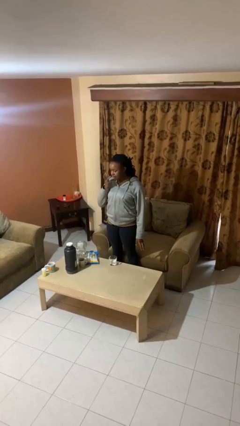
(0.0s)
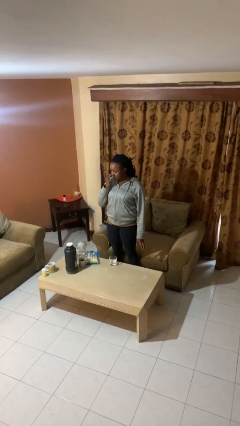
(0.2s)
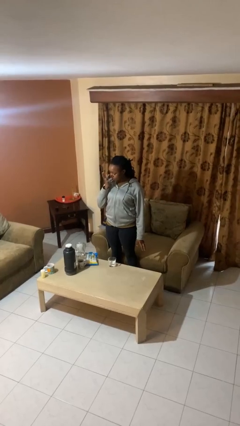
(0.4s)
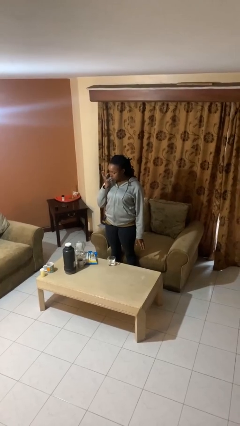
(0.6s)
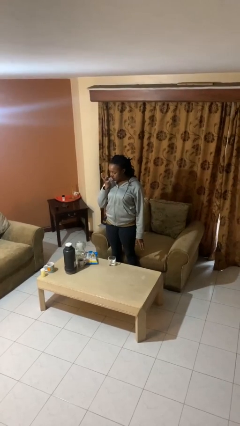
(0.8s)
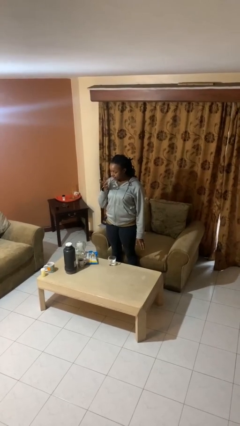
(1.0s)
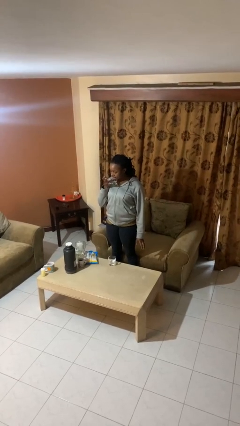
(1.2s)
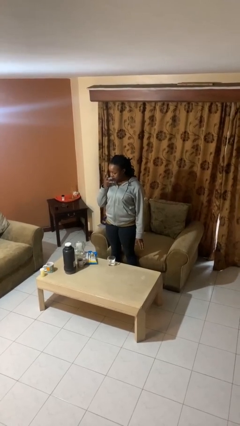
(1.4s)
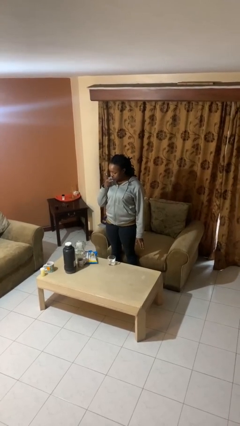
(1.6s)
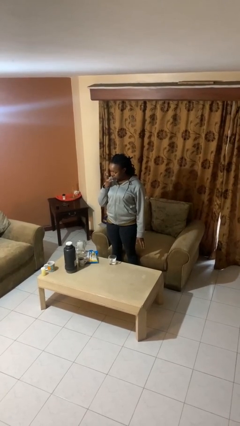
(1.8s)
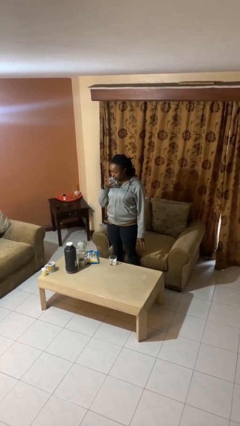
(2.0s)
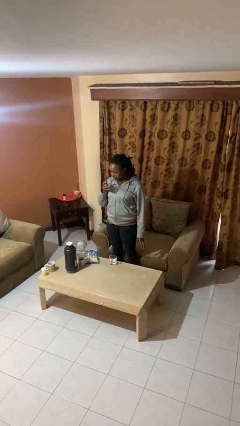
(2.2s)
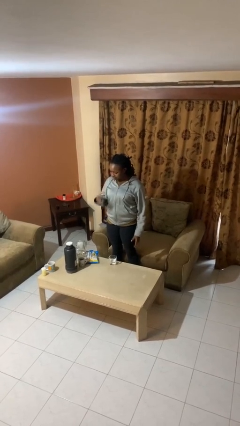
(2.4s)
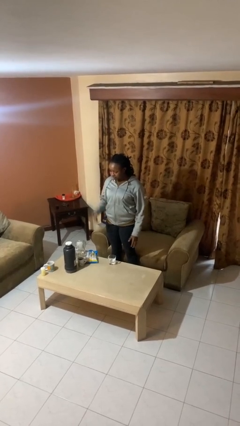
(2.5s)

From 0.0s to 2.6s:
person licks fingers

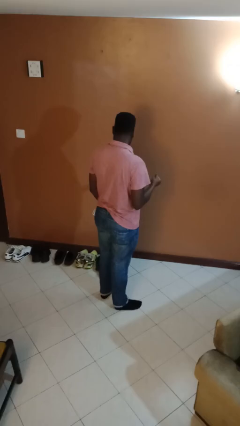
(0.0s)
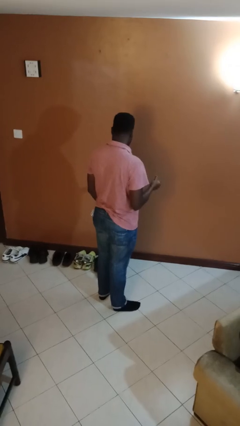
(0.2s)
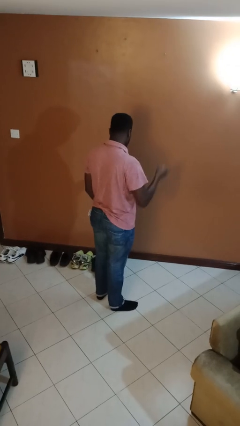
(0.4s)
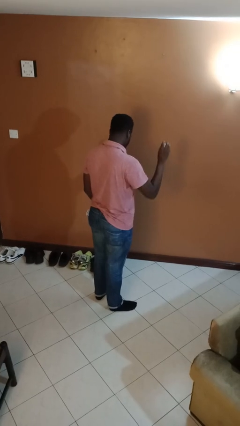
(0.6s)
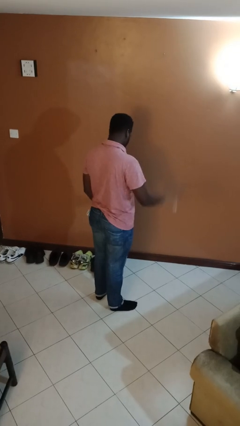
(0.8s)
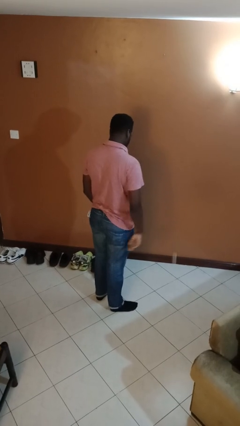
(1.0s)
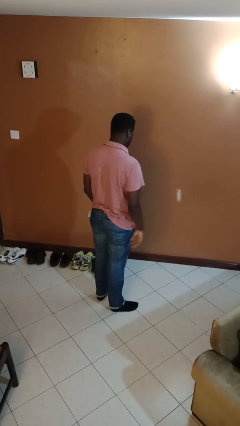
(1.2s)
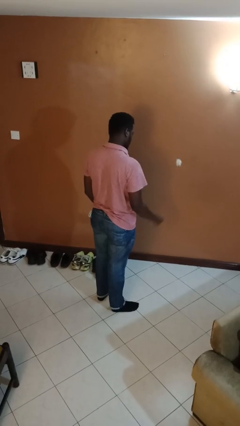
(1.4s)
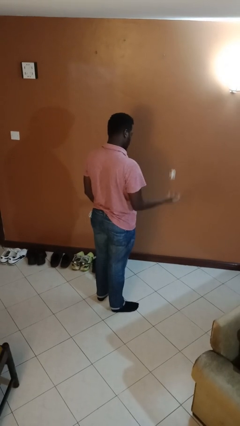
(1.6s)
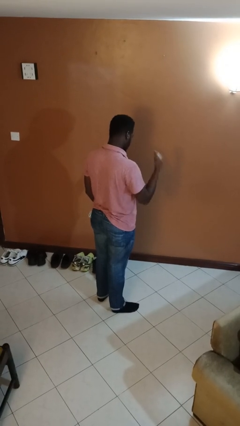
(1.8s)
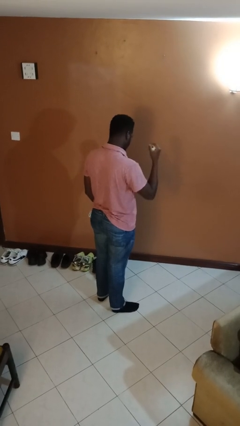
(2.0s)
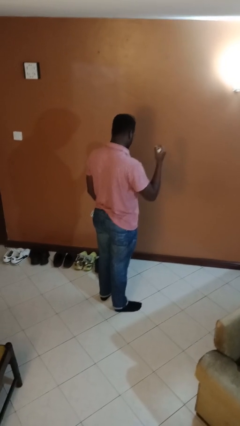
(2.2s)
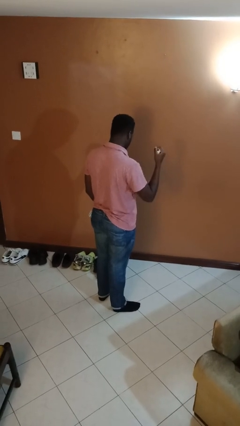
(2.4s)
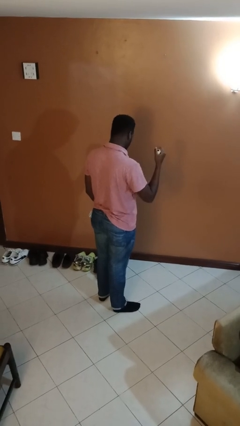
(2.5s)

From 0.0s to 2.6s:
person bounces ball on floor

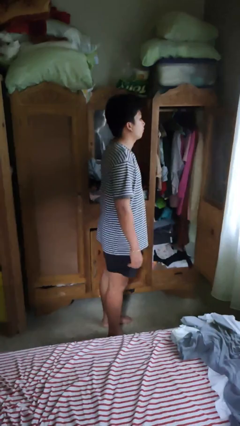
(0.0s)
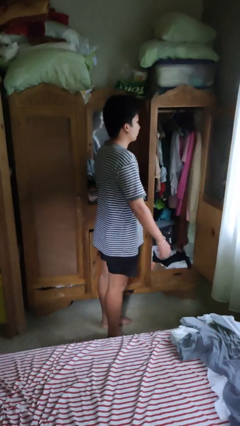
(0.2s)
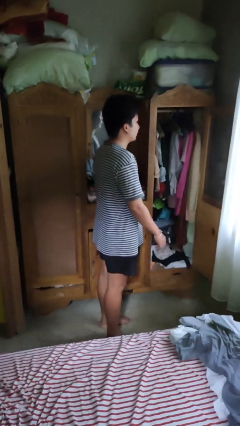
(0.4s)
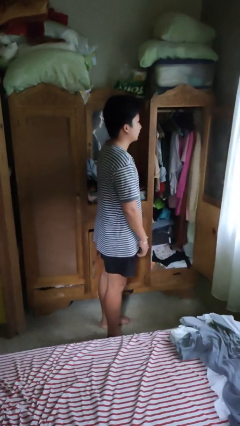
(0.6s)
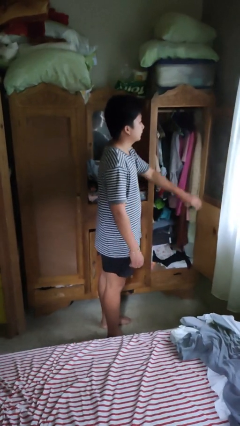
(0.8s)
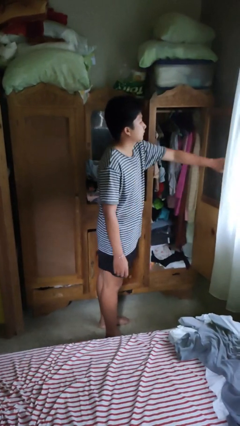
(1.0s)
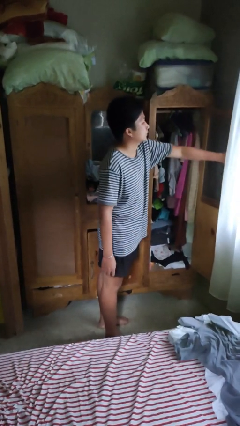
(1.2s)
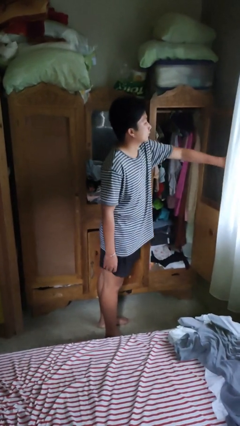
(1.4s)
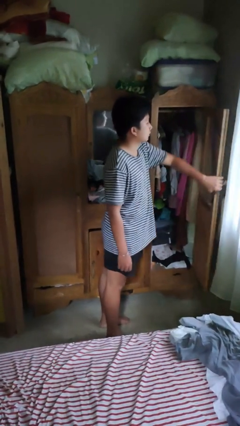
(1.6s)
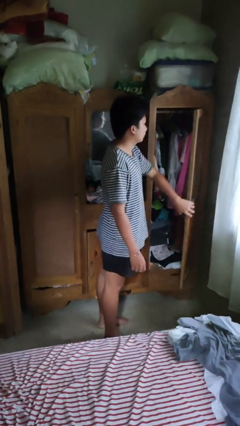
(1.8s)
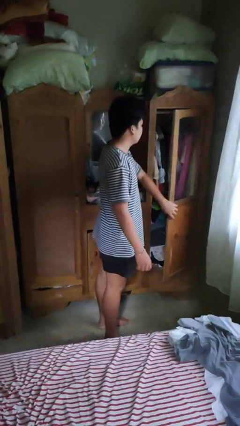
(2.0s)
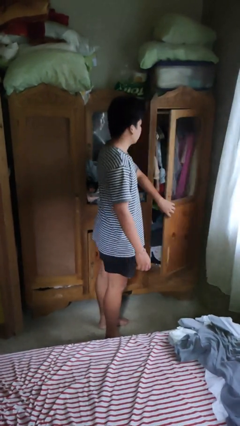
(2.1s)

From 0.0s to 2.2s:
person closes closet door

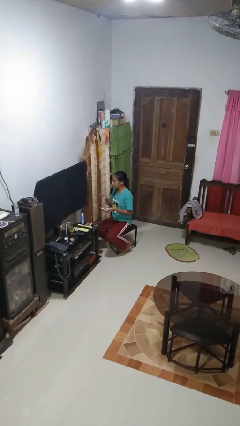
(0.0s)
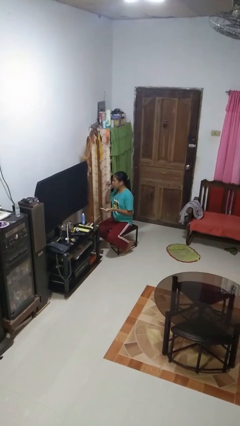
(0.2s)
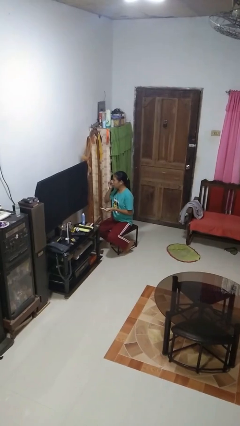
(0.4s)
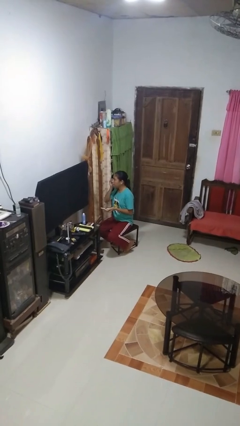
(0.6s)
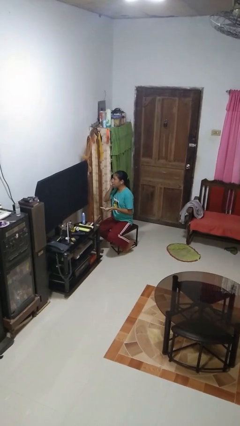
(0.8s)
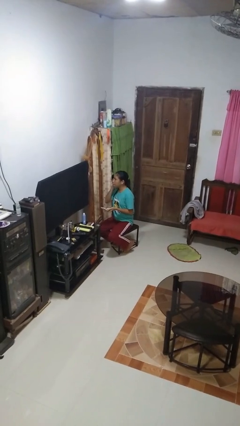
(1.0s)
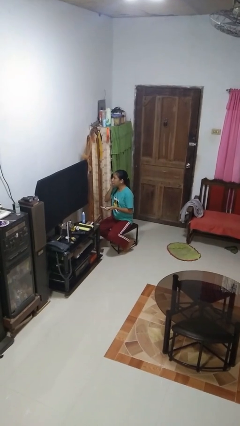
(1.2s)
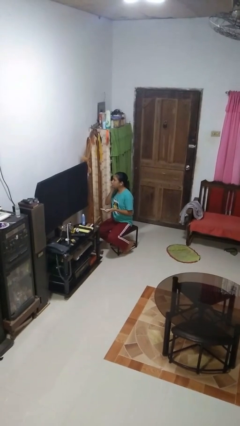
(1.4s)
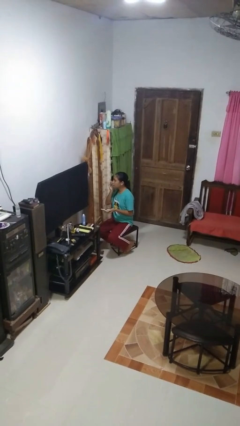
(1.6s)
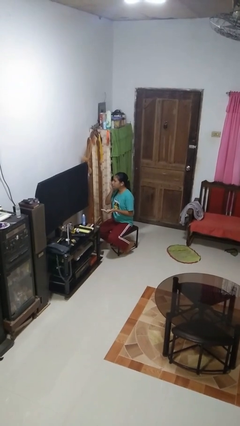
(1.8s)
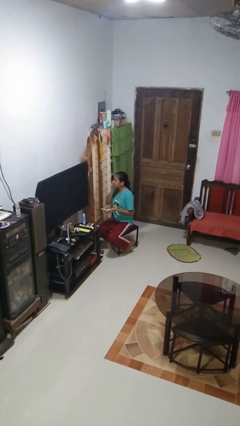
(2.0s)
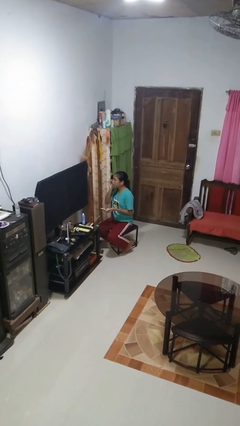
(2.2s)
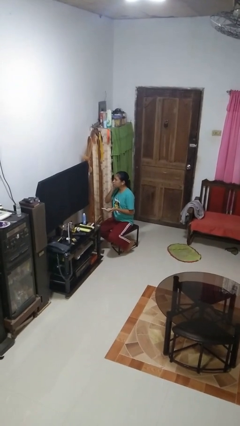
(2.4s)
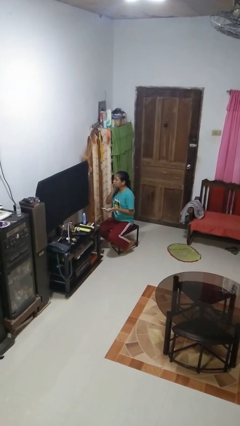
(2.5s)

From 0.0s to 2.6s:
person applies foundation makeup

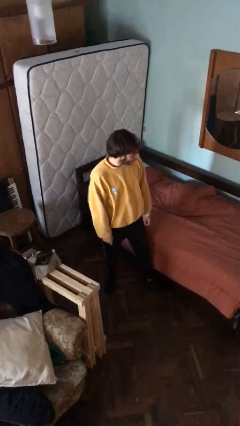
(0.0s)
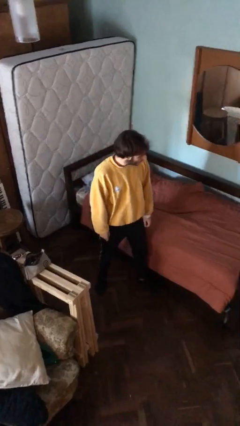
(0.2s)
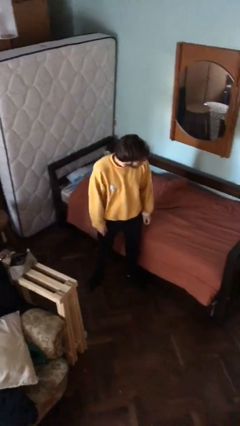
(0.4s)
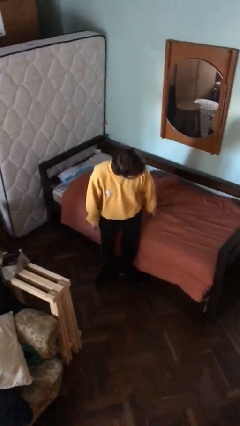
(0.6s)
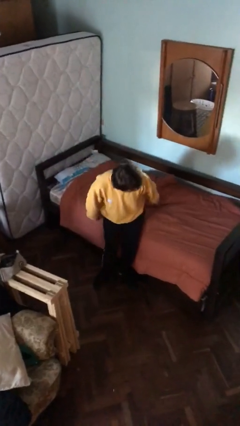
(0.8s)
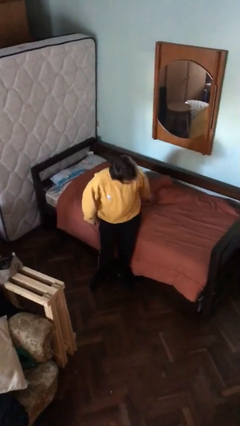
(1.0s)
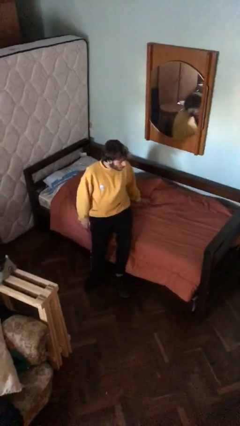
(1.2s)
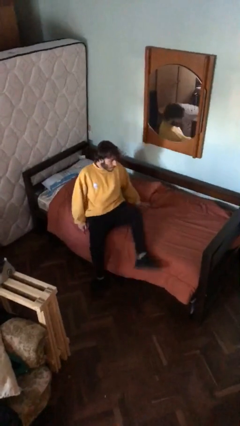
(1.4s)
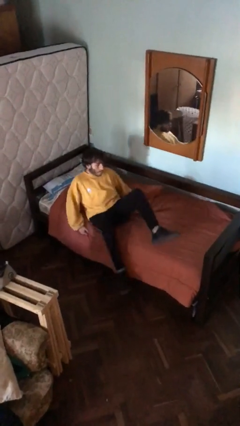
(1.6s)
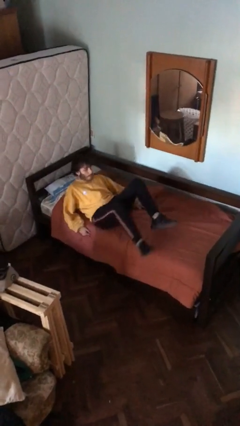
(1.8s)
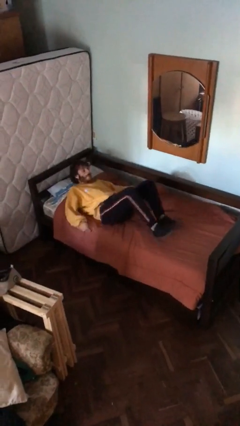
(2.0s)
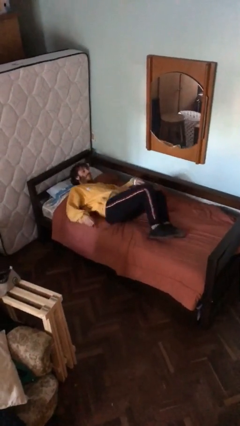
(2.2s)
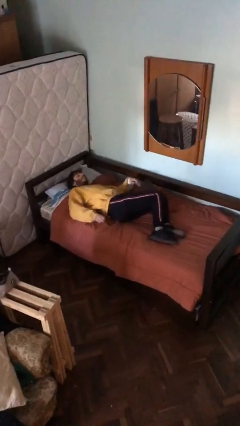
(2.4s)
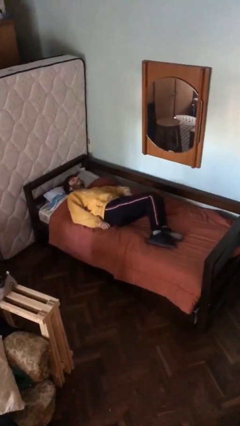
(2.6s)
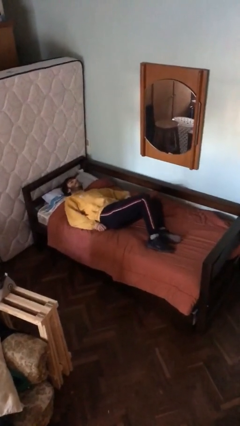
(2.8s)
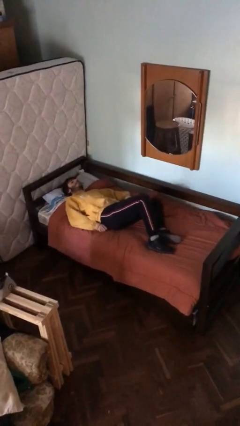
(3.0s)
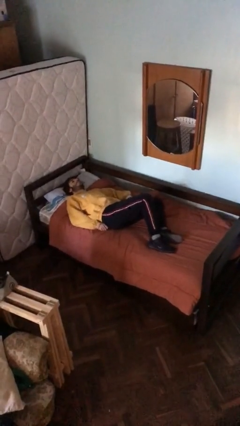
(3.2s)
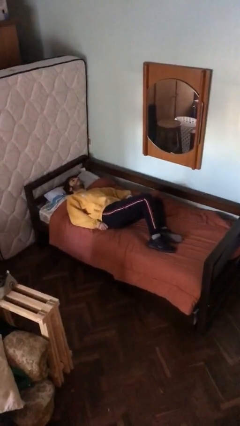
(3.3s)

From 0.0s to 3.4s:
person lies down on bed

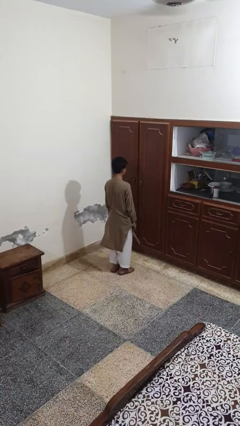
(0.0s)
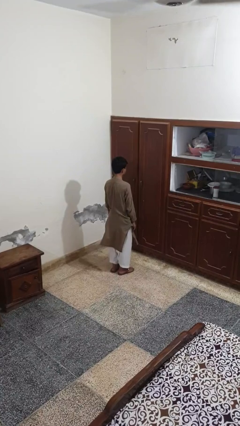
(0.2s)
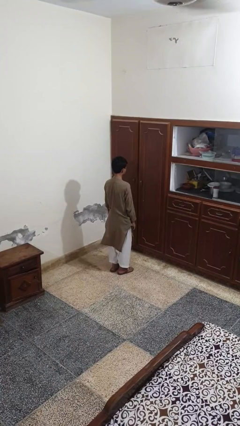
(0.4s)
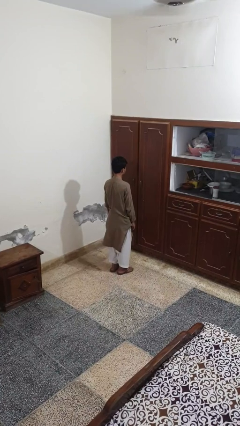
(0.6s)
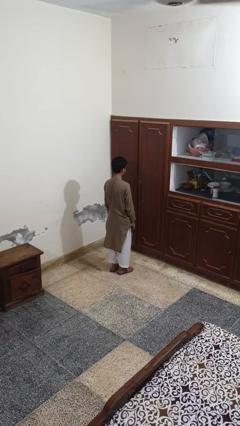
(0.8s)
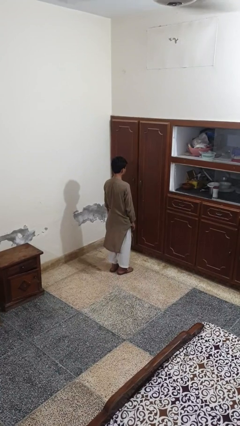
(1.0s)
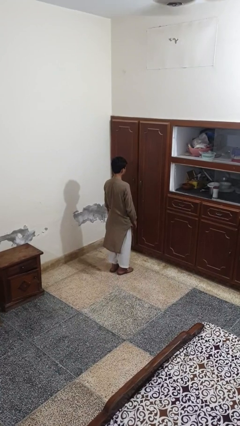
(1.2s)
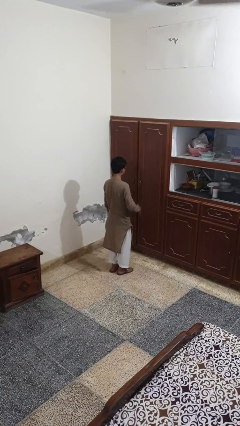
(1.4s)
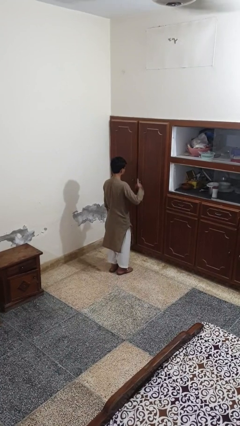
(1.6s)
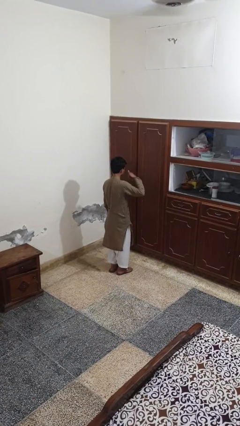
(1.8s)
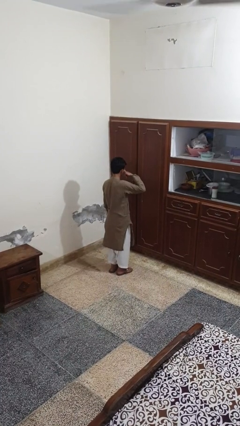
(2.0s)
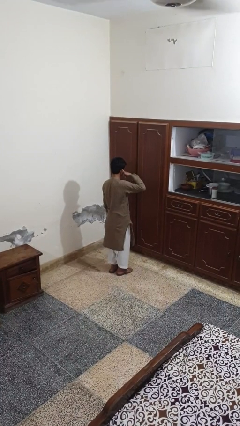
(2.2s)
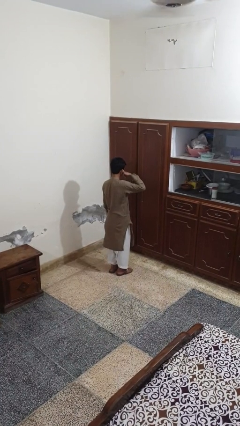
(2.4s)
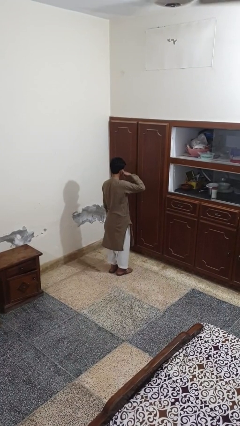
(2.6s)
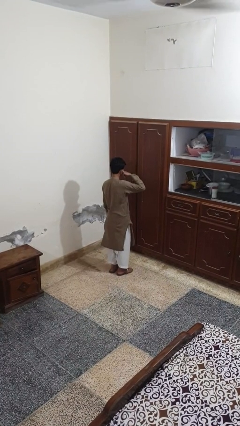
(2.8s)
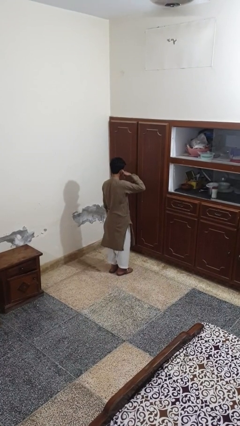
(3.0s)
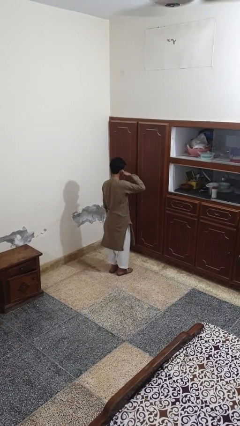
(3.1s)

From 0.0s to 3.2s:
person gestures call me

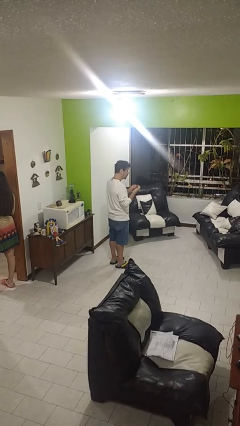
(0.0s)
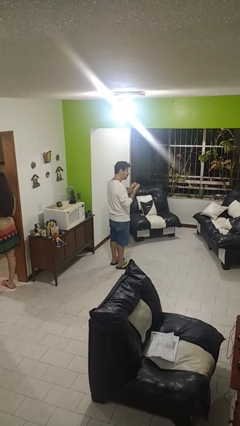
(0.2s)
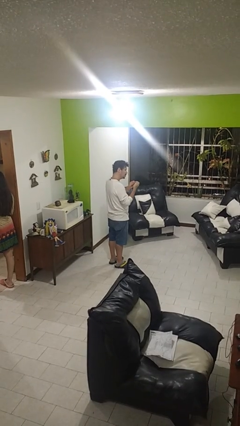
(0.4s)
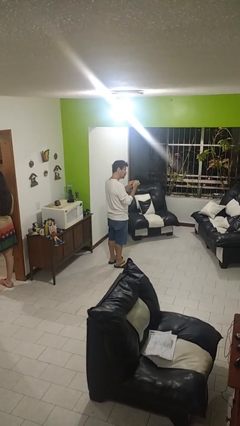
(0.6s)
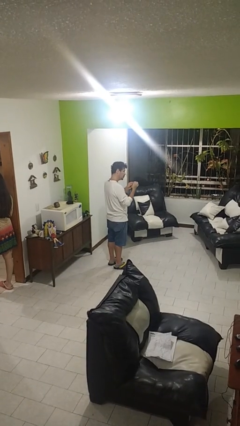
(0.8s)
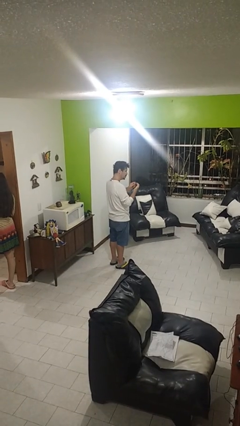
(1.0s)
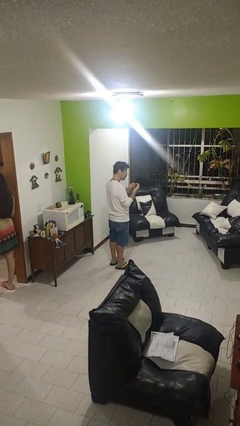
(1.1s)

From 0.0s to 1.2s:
person files fingernails
